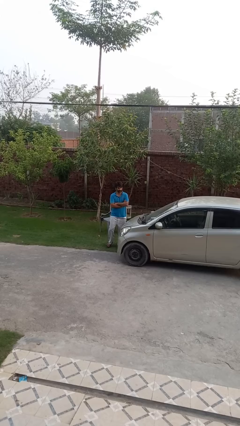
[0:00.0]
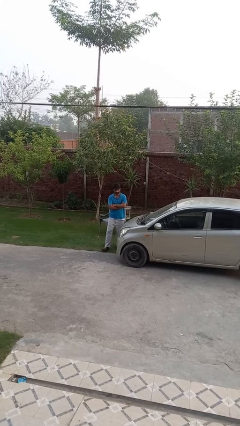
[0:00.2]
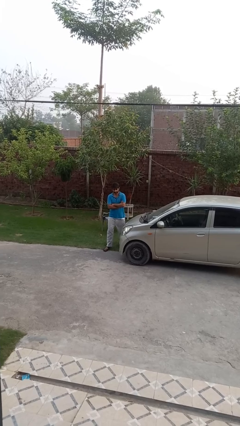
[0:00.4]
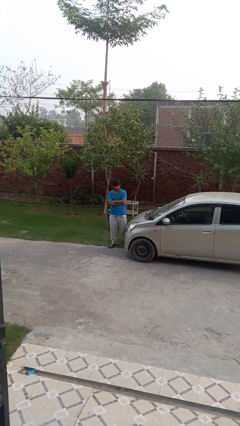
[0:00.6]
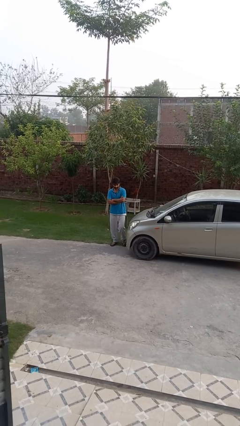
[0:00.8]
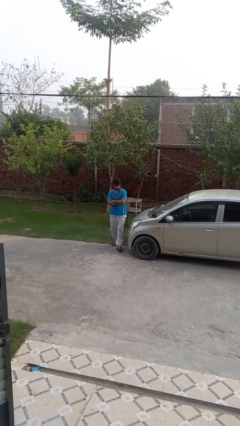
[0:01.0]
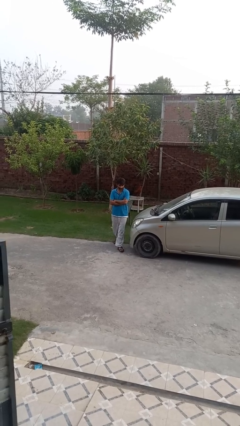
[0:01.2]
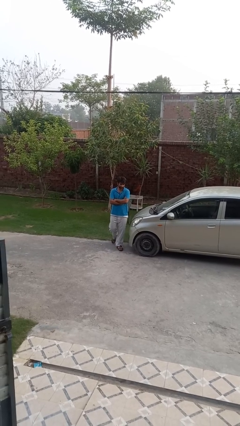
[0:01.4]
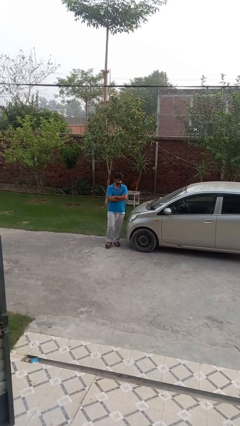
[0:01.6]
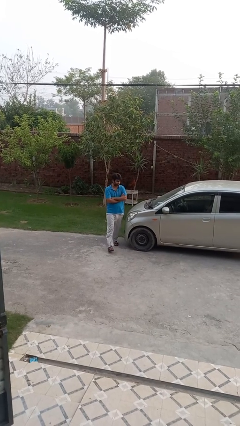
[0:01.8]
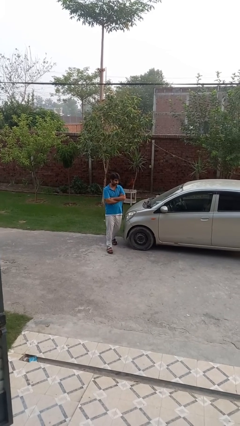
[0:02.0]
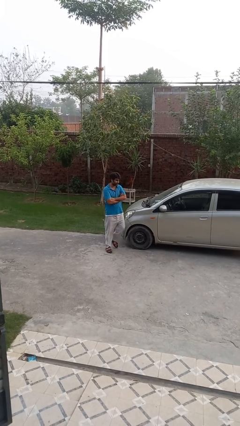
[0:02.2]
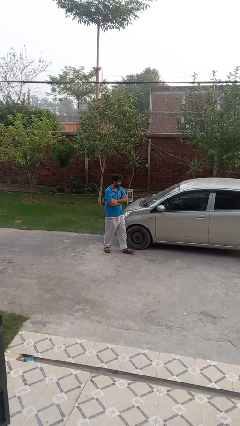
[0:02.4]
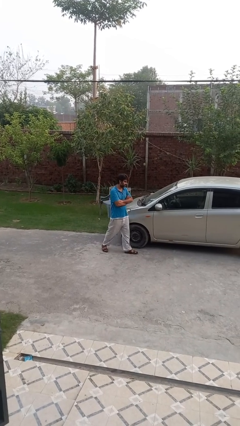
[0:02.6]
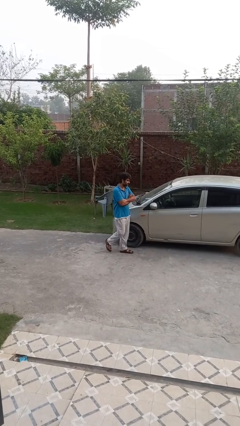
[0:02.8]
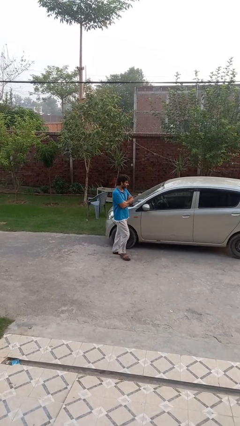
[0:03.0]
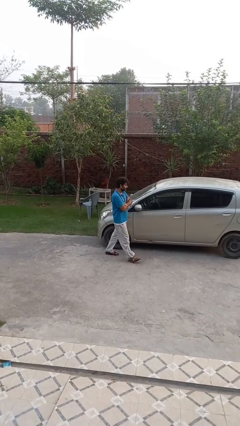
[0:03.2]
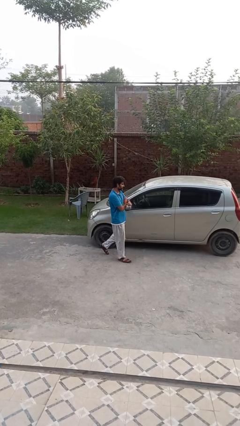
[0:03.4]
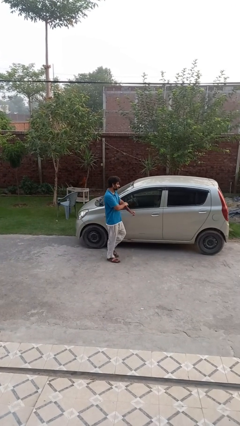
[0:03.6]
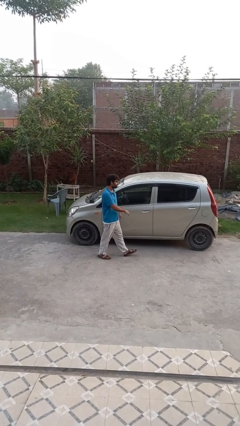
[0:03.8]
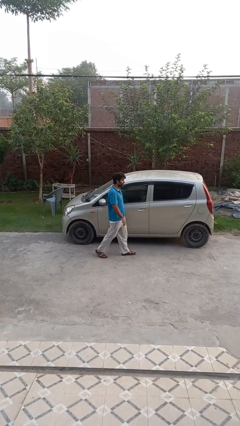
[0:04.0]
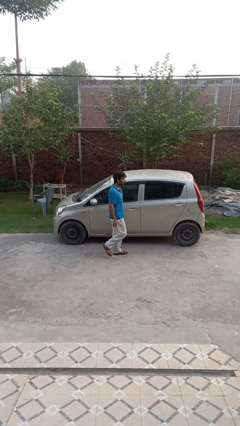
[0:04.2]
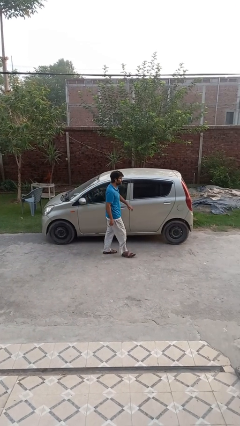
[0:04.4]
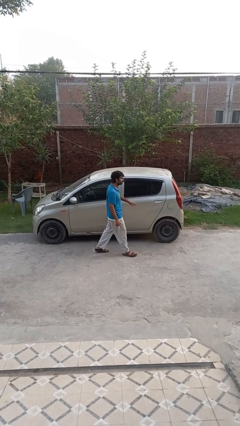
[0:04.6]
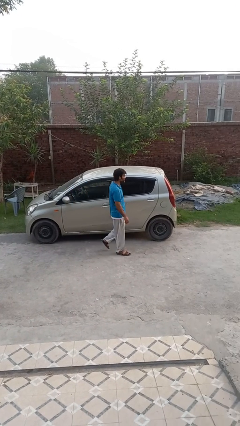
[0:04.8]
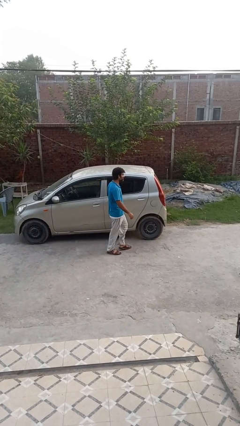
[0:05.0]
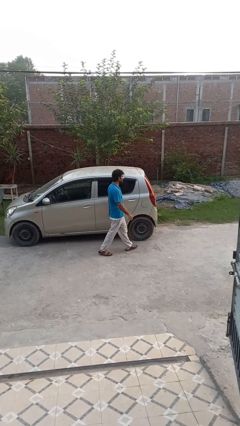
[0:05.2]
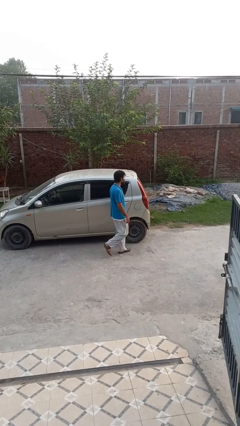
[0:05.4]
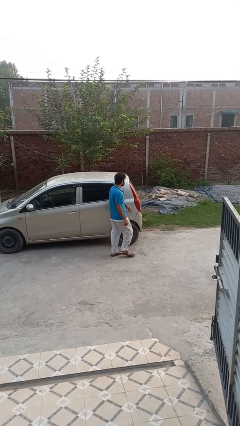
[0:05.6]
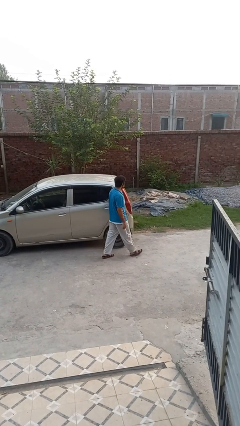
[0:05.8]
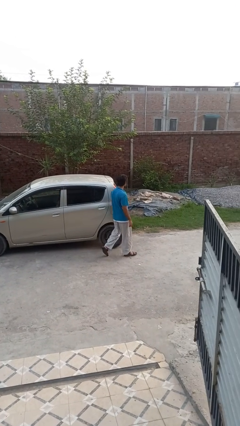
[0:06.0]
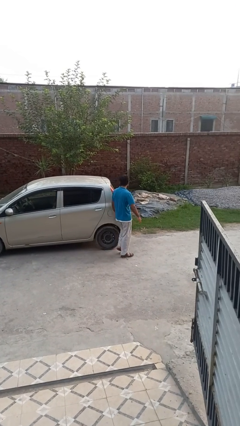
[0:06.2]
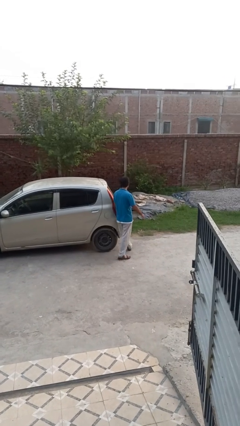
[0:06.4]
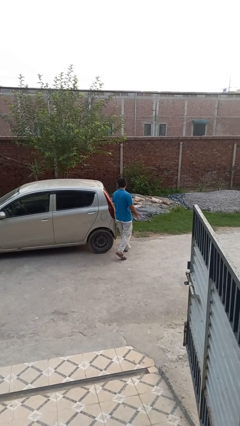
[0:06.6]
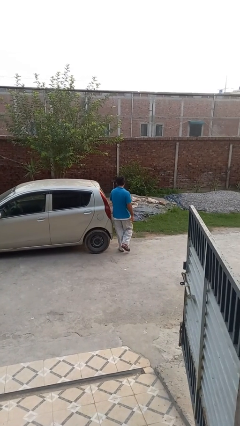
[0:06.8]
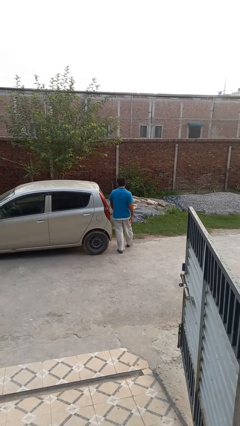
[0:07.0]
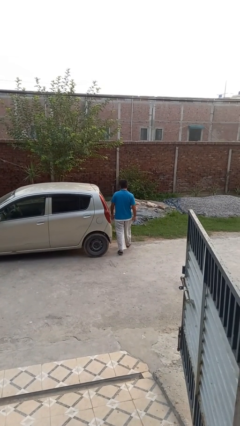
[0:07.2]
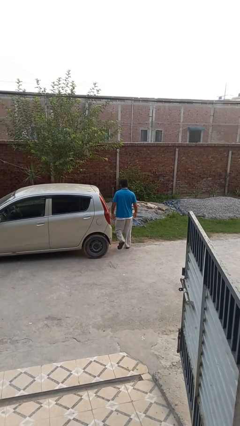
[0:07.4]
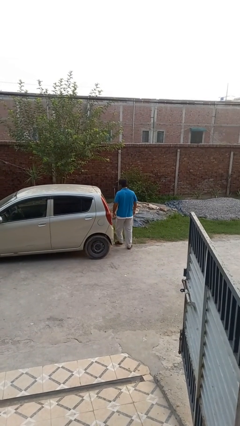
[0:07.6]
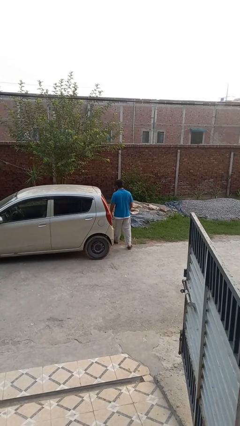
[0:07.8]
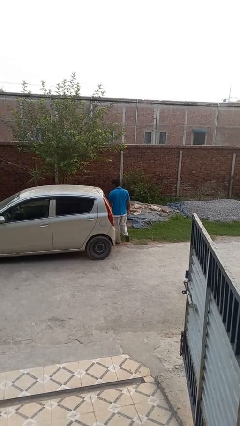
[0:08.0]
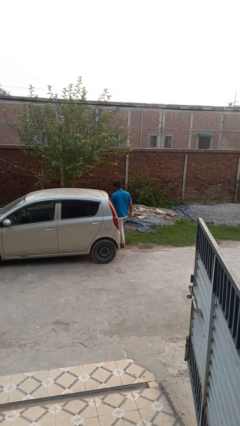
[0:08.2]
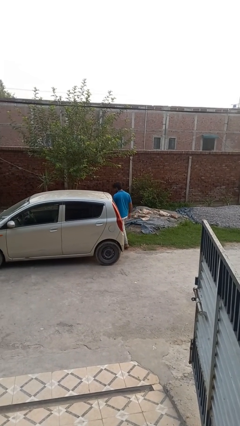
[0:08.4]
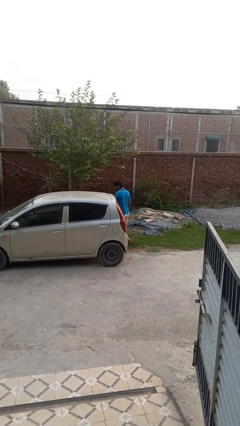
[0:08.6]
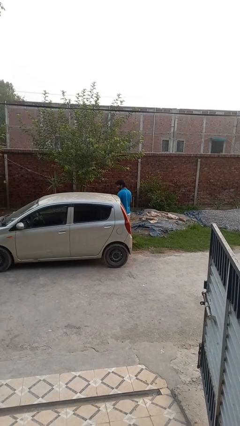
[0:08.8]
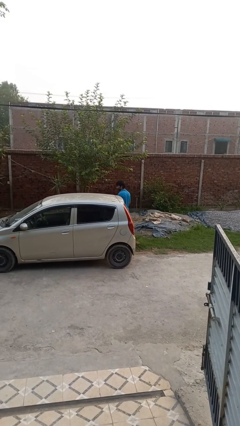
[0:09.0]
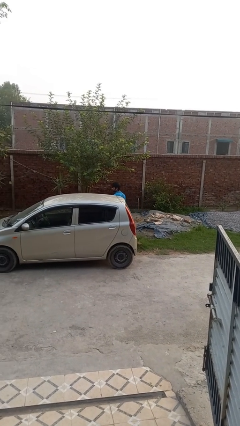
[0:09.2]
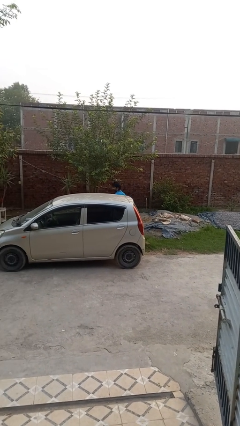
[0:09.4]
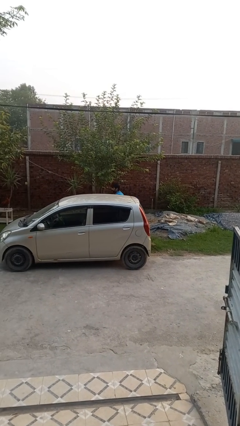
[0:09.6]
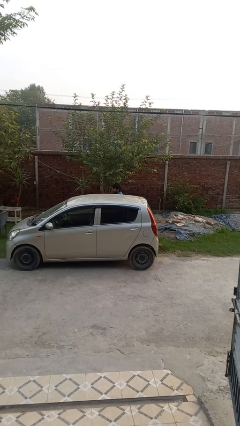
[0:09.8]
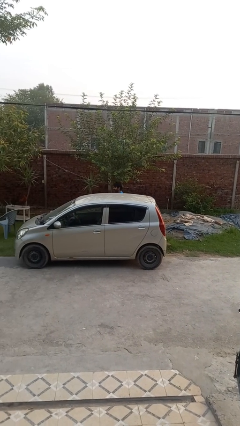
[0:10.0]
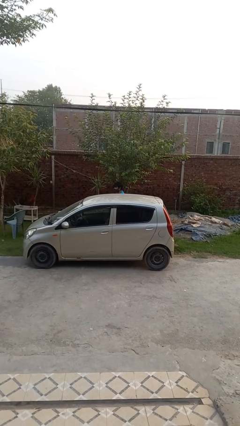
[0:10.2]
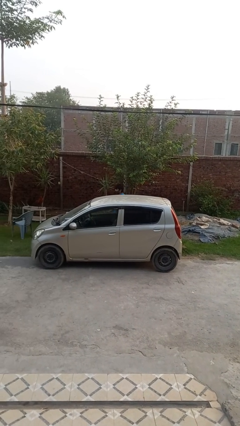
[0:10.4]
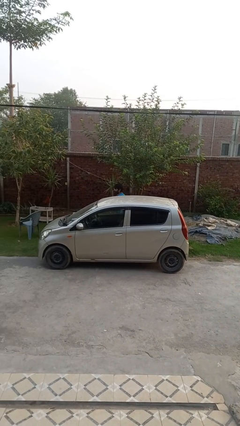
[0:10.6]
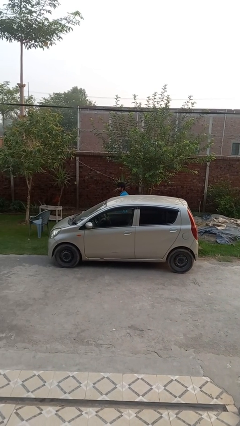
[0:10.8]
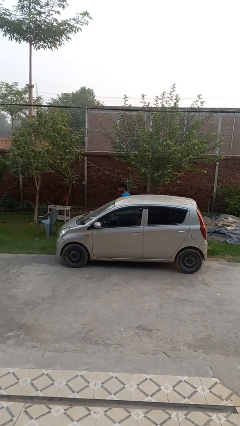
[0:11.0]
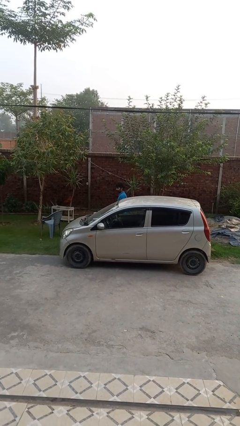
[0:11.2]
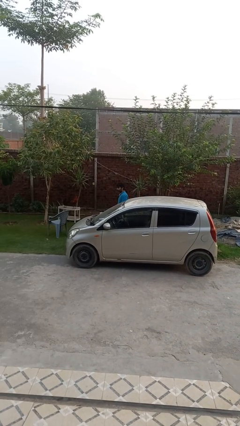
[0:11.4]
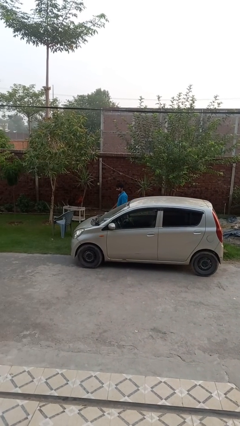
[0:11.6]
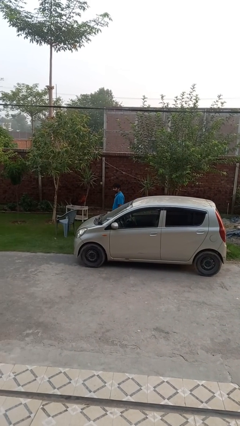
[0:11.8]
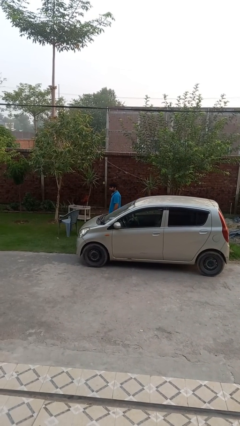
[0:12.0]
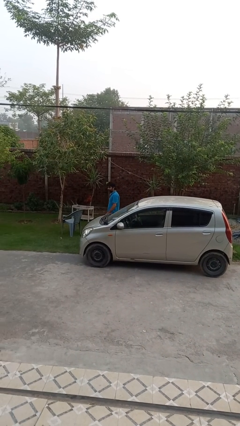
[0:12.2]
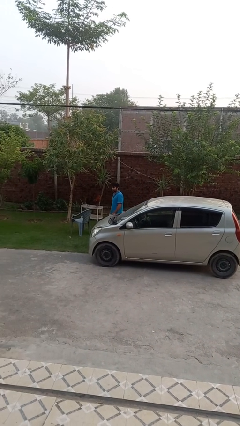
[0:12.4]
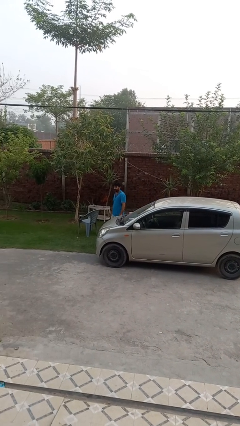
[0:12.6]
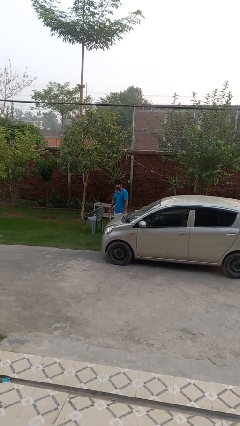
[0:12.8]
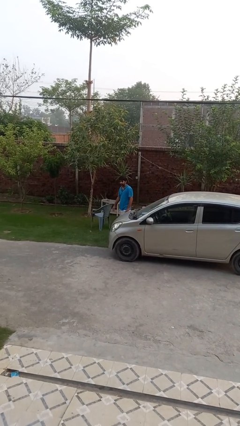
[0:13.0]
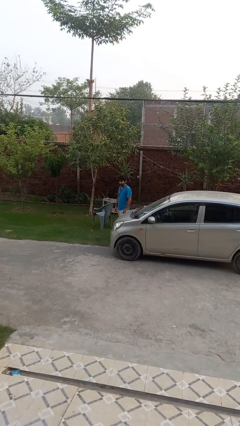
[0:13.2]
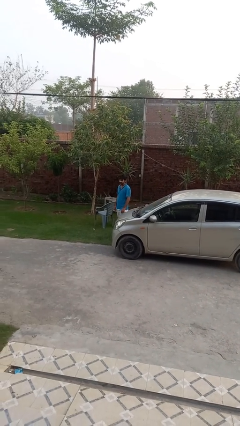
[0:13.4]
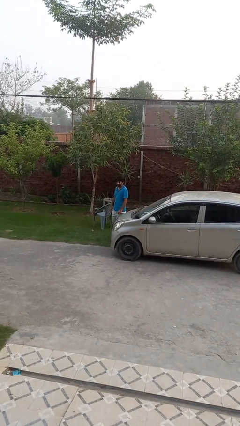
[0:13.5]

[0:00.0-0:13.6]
person walks around car

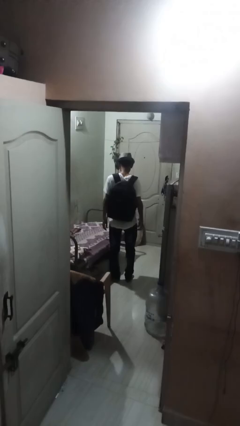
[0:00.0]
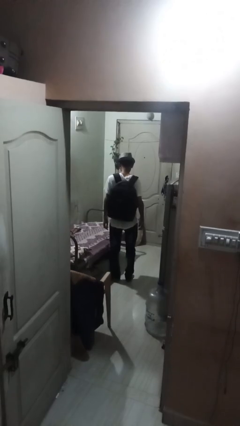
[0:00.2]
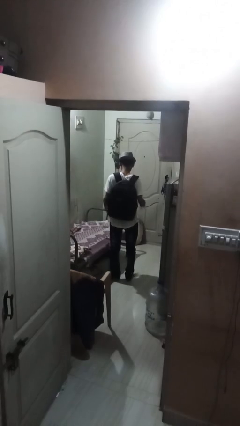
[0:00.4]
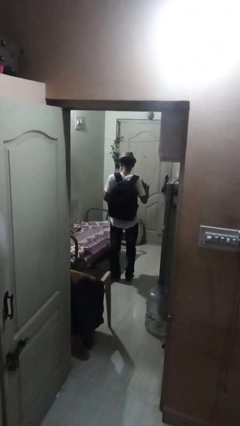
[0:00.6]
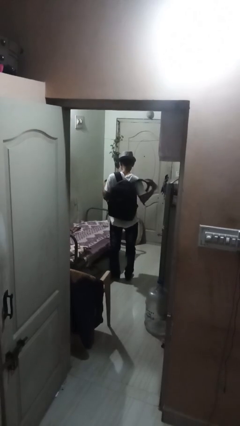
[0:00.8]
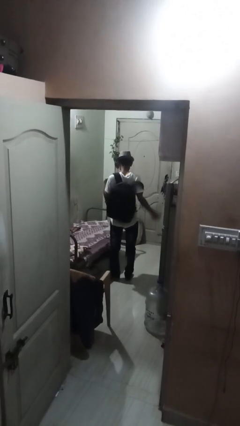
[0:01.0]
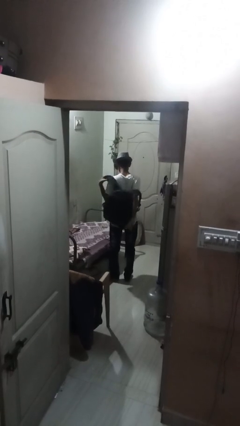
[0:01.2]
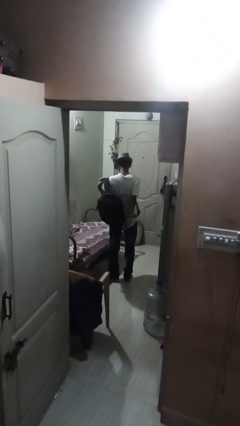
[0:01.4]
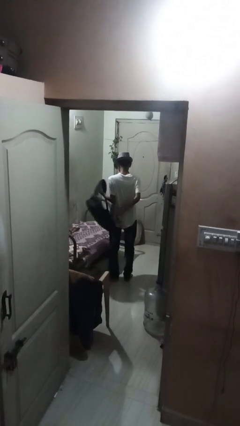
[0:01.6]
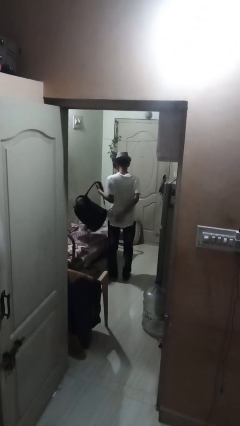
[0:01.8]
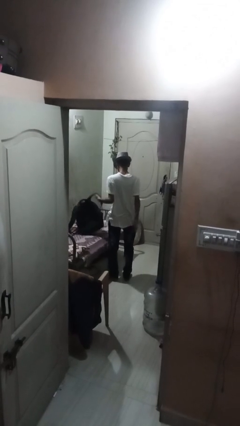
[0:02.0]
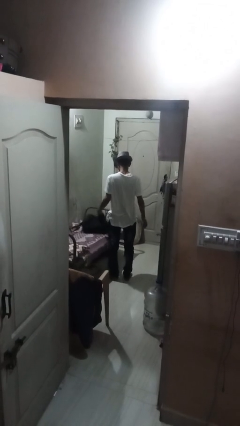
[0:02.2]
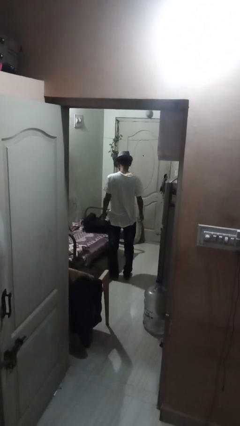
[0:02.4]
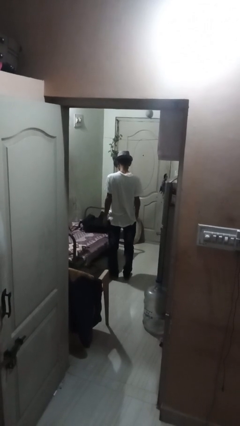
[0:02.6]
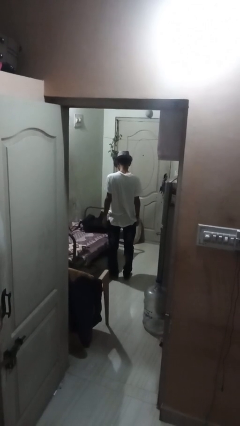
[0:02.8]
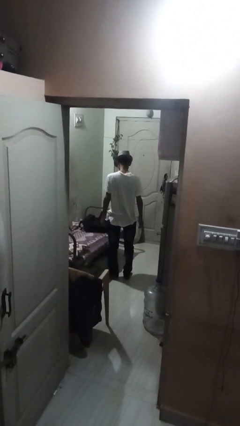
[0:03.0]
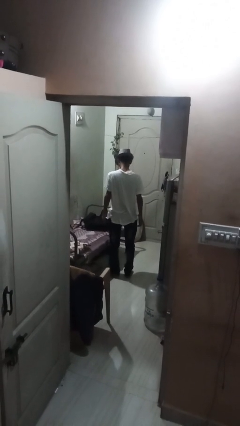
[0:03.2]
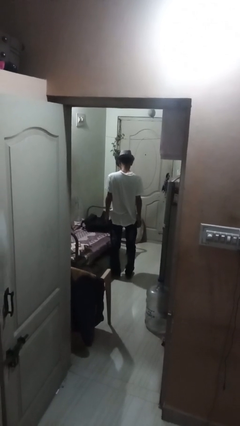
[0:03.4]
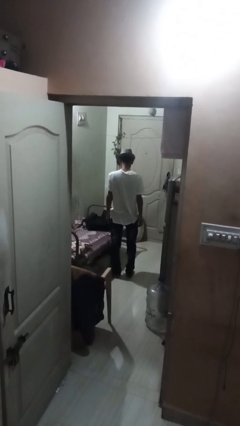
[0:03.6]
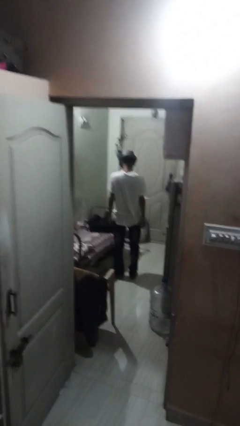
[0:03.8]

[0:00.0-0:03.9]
person takes off backpack

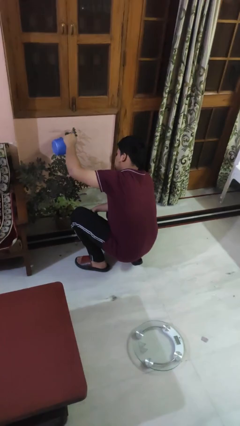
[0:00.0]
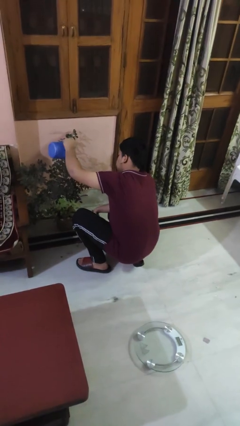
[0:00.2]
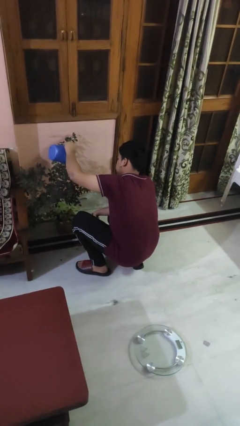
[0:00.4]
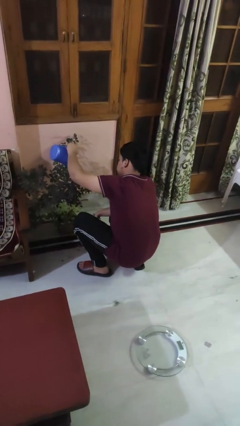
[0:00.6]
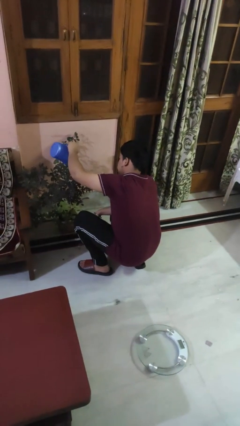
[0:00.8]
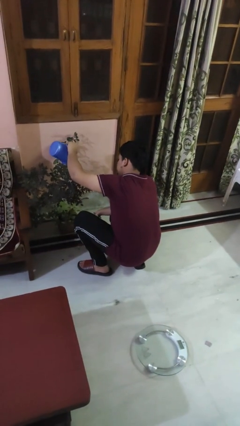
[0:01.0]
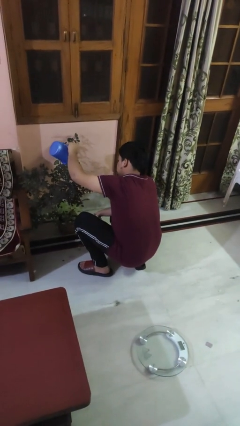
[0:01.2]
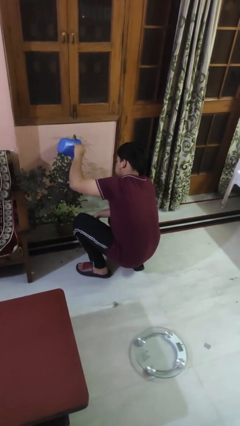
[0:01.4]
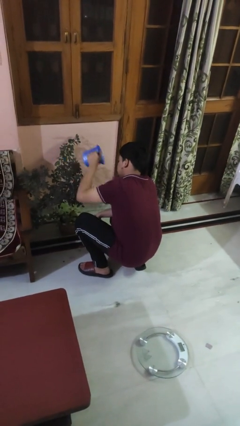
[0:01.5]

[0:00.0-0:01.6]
person waters houseplant
